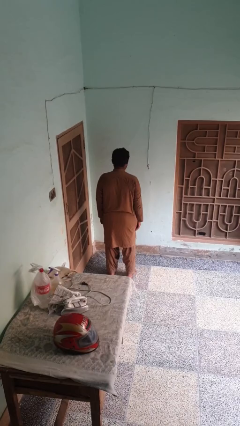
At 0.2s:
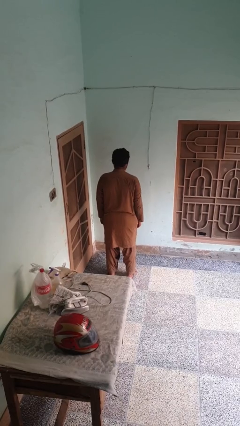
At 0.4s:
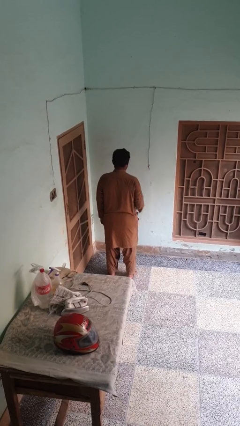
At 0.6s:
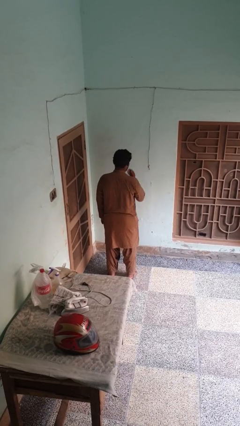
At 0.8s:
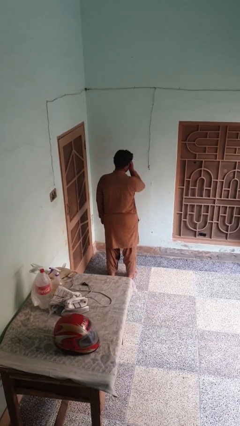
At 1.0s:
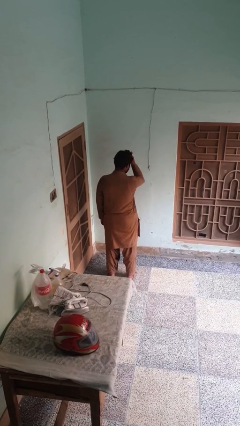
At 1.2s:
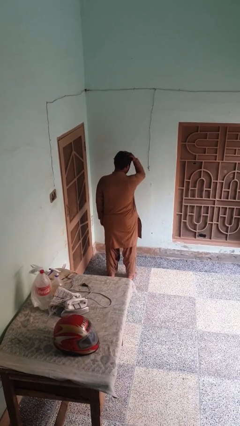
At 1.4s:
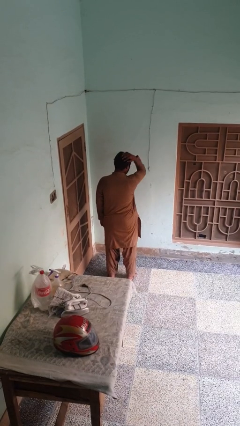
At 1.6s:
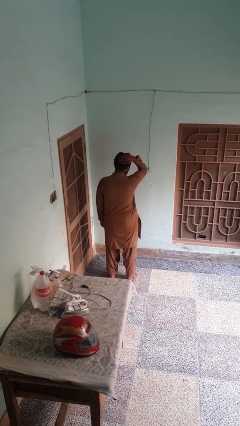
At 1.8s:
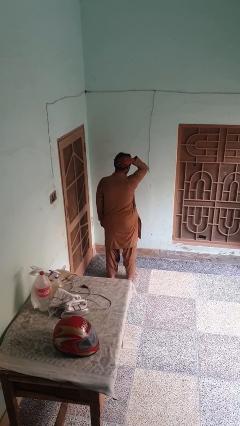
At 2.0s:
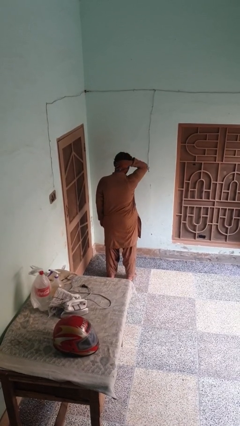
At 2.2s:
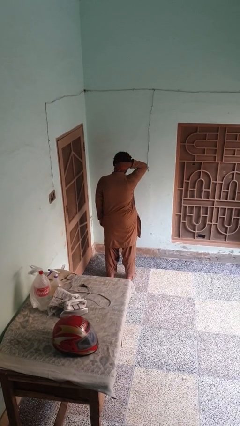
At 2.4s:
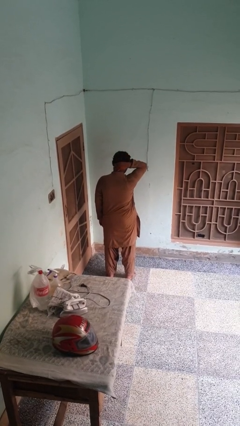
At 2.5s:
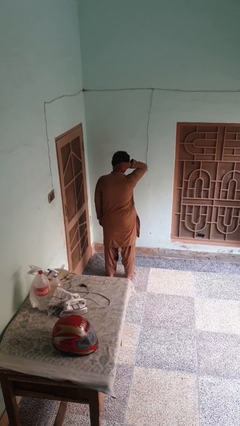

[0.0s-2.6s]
person strokes hair

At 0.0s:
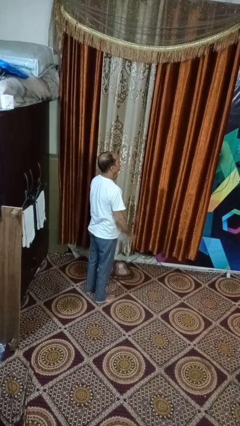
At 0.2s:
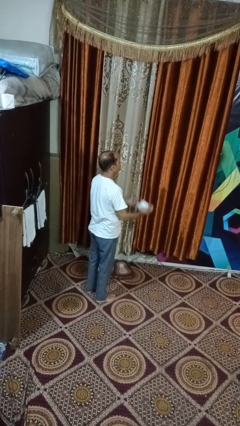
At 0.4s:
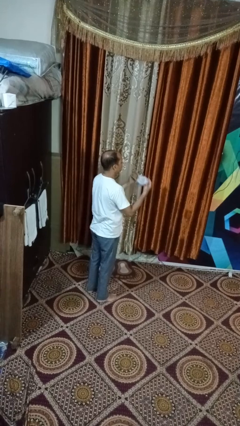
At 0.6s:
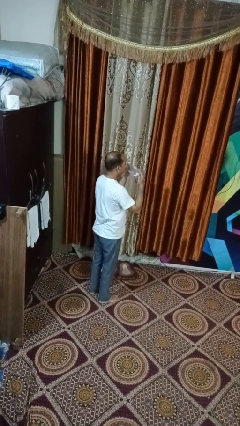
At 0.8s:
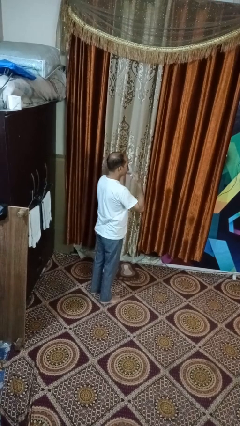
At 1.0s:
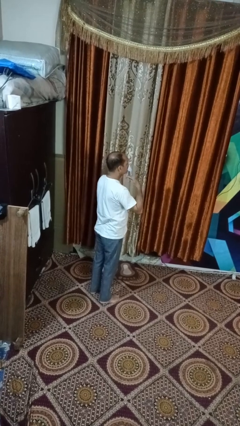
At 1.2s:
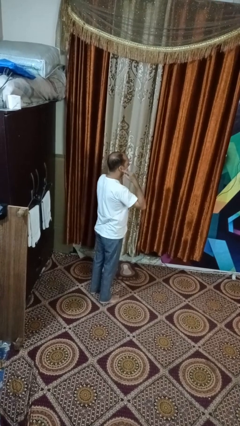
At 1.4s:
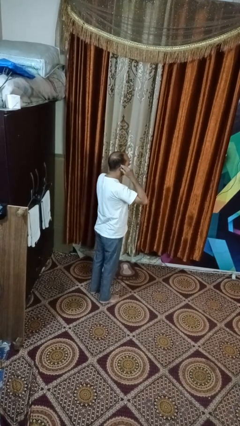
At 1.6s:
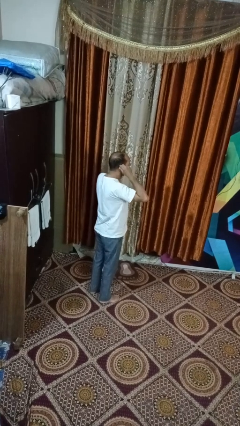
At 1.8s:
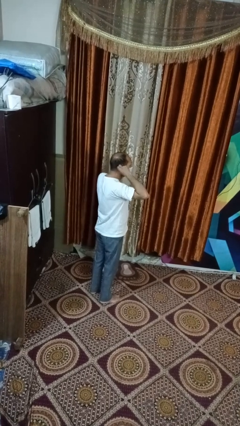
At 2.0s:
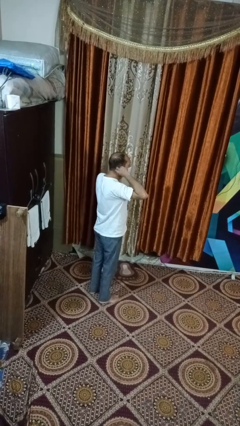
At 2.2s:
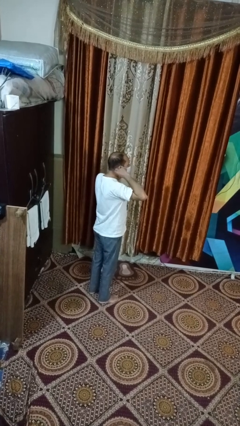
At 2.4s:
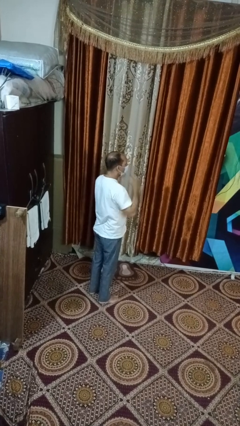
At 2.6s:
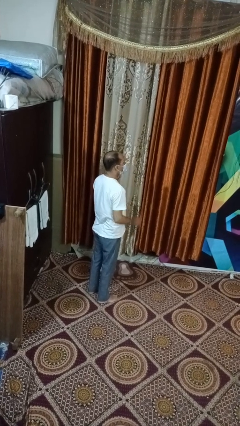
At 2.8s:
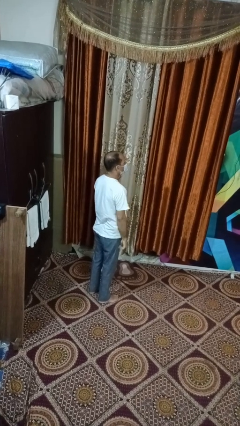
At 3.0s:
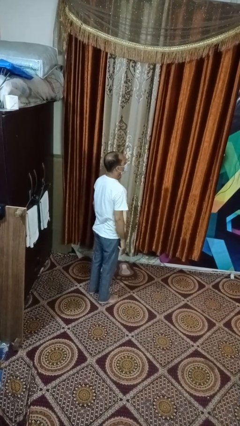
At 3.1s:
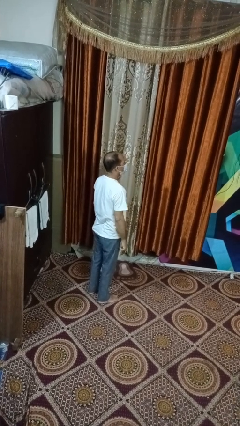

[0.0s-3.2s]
person puts on facemask

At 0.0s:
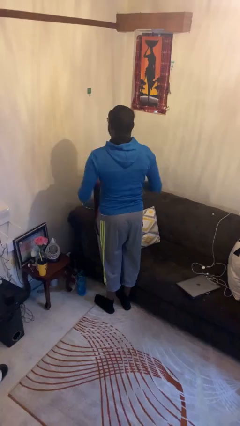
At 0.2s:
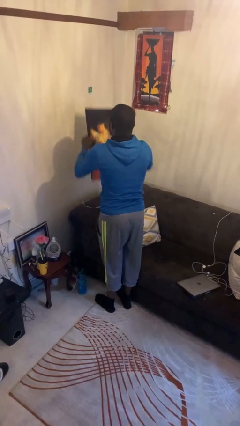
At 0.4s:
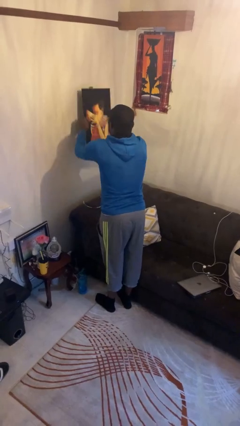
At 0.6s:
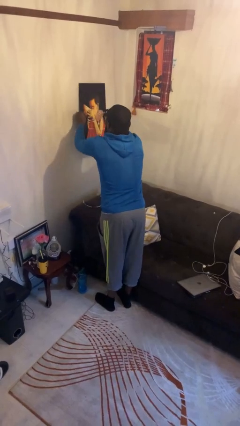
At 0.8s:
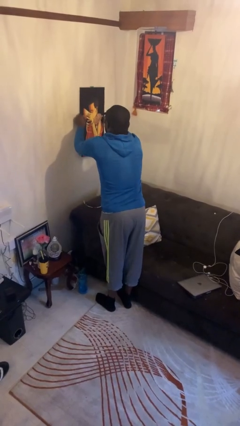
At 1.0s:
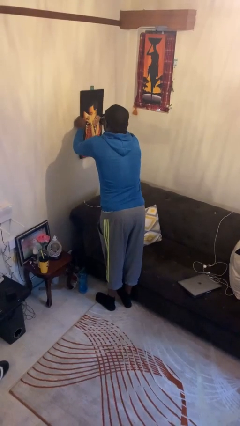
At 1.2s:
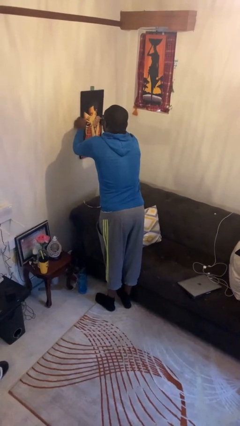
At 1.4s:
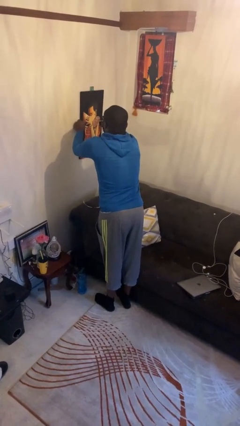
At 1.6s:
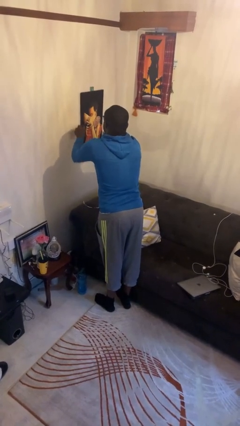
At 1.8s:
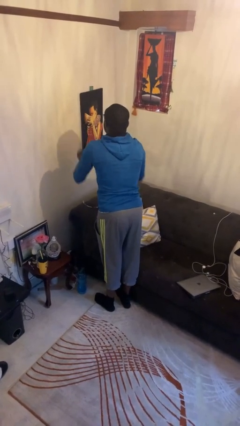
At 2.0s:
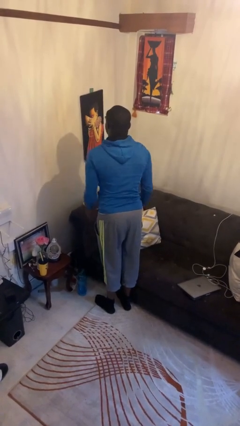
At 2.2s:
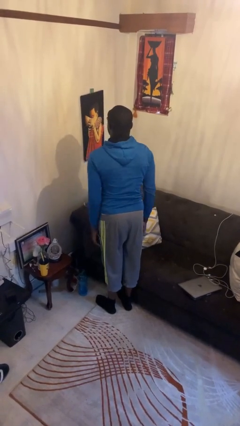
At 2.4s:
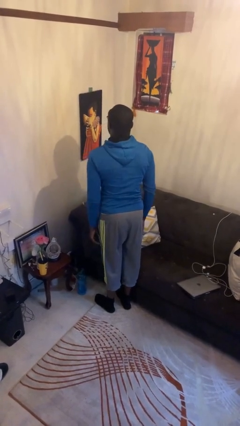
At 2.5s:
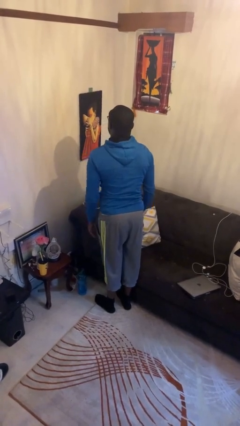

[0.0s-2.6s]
person puts up picture frame

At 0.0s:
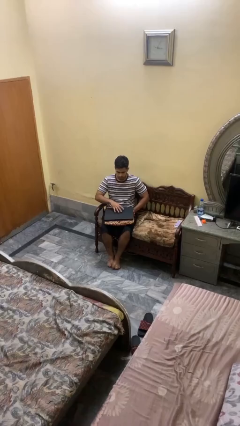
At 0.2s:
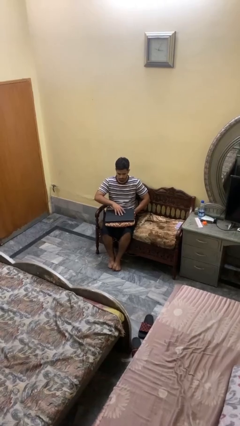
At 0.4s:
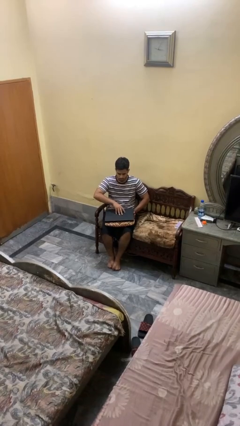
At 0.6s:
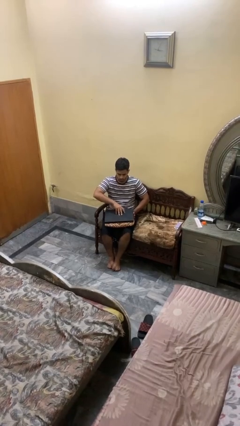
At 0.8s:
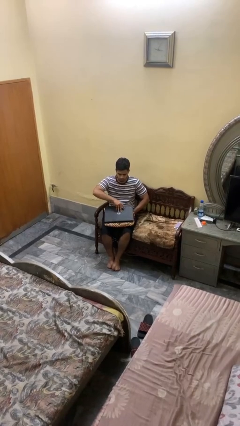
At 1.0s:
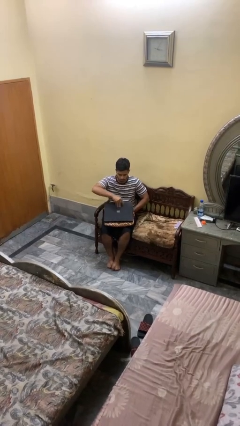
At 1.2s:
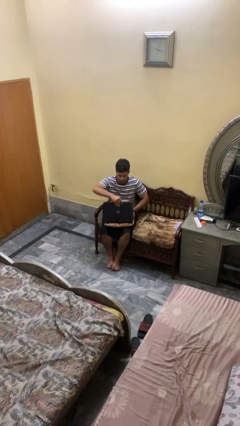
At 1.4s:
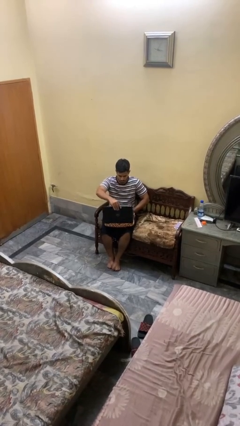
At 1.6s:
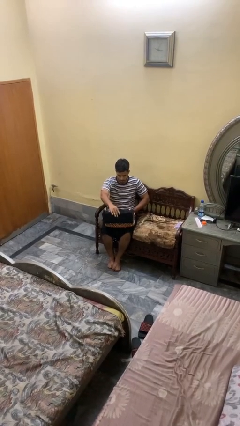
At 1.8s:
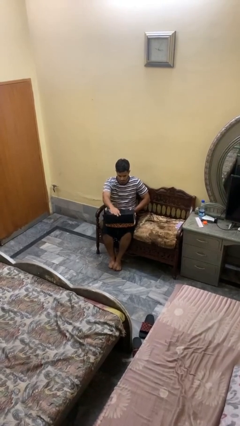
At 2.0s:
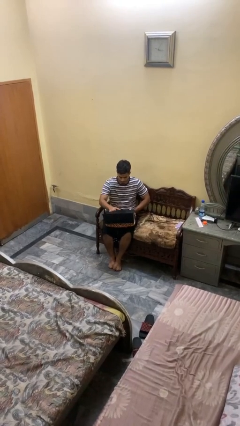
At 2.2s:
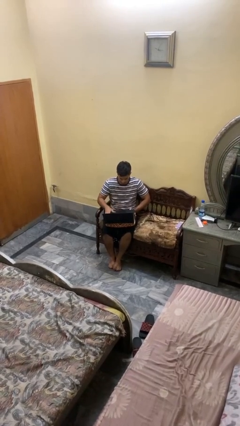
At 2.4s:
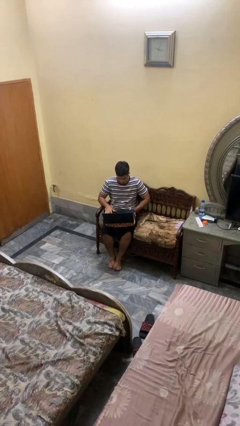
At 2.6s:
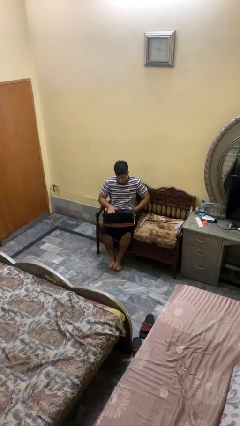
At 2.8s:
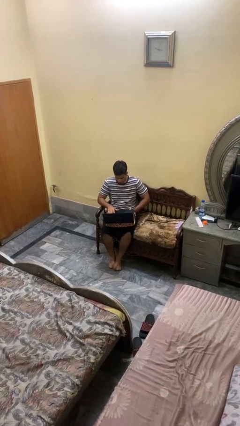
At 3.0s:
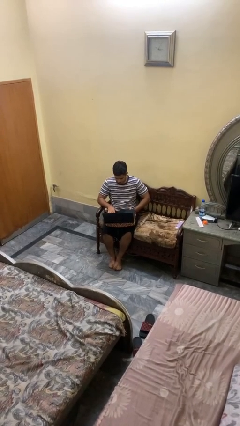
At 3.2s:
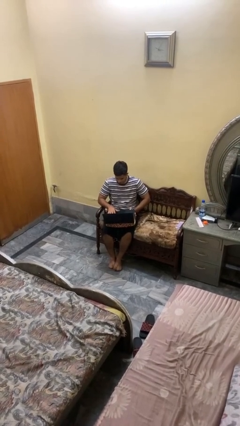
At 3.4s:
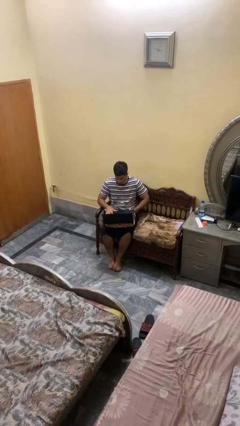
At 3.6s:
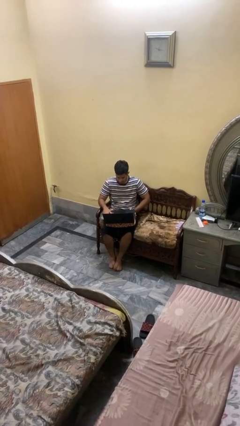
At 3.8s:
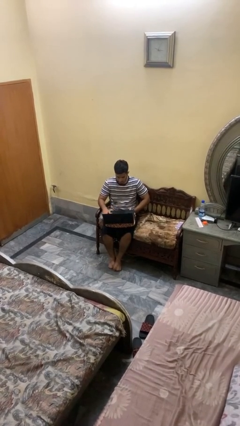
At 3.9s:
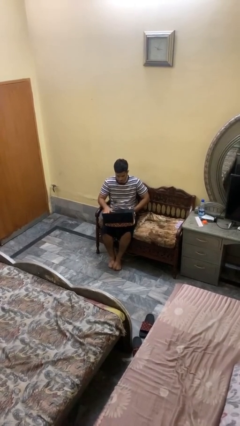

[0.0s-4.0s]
person opens laptop

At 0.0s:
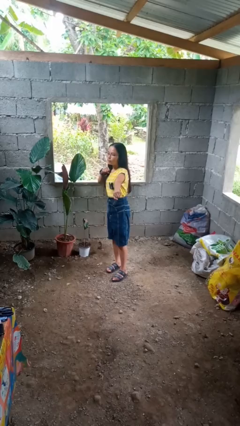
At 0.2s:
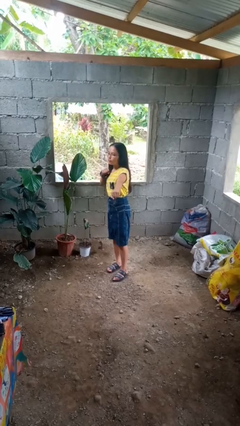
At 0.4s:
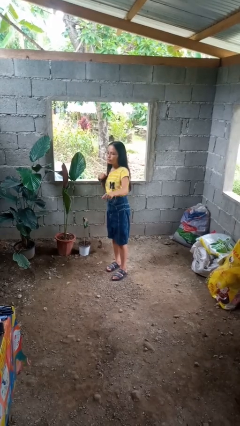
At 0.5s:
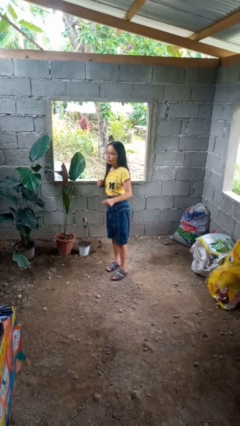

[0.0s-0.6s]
person karate chop

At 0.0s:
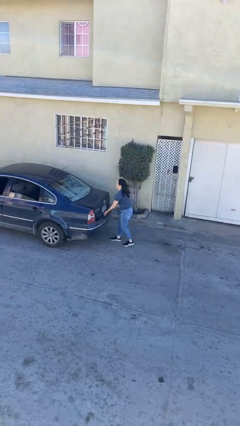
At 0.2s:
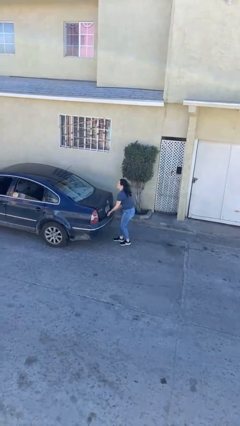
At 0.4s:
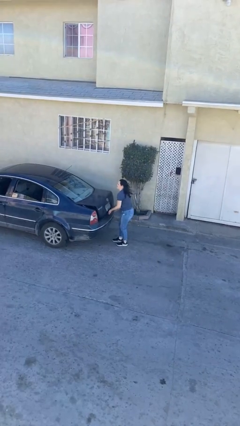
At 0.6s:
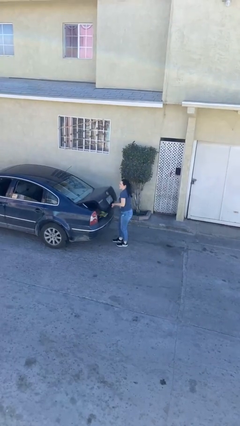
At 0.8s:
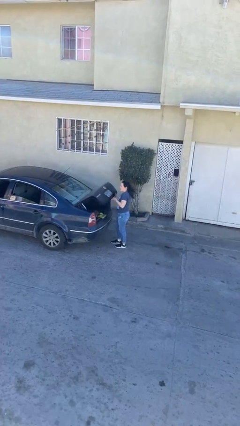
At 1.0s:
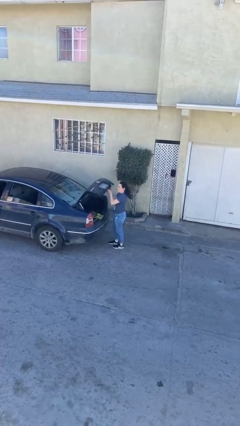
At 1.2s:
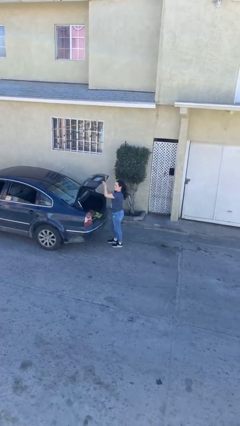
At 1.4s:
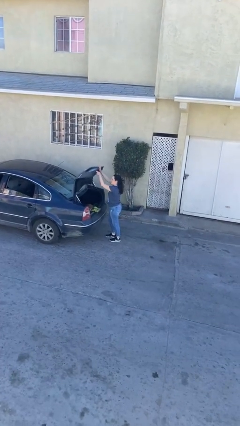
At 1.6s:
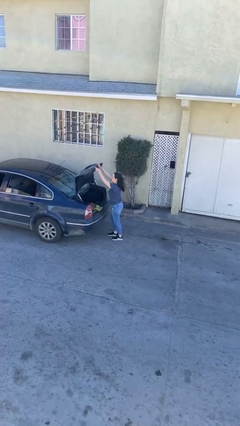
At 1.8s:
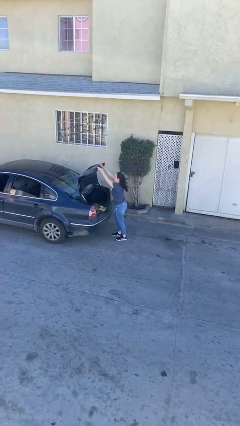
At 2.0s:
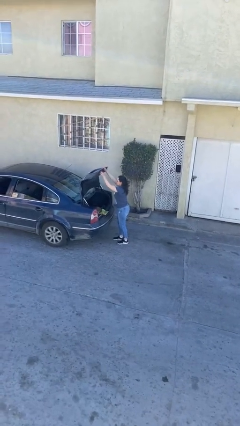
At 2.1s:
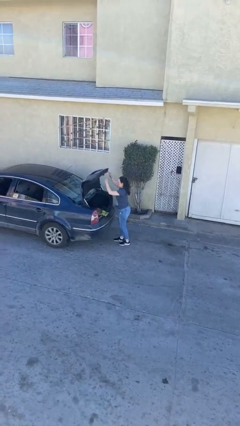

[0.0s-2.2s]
person opens car trunk

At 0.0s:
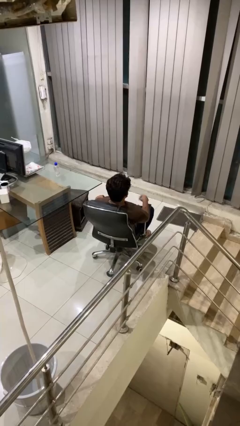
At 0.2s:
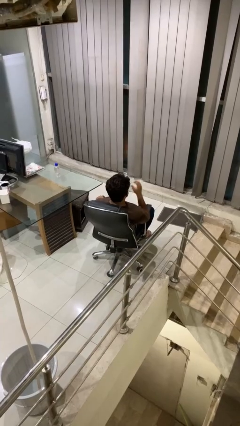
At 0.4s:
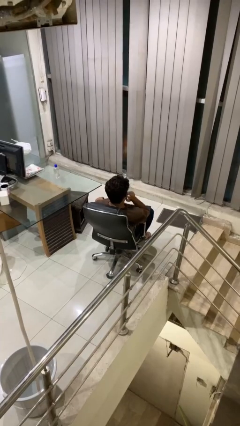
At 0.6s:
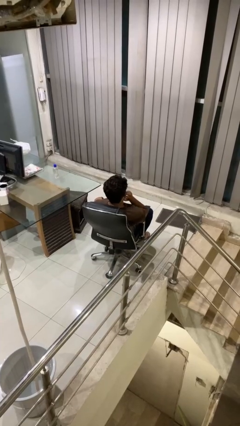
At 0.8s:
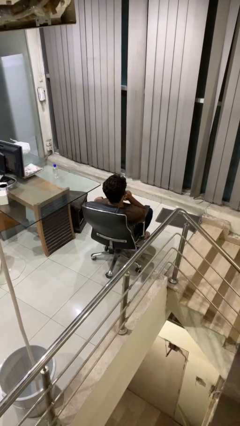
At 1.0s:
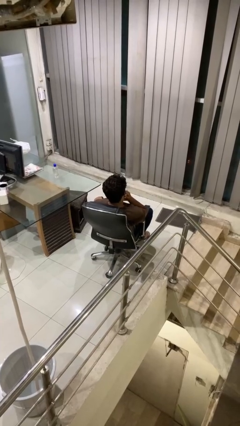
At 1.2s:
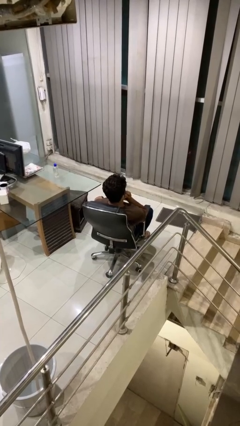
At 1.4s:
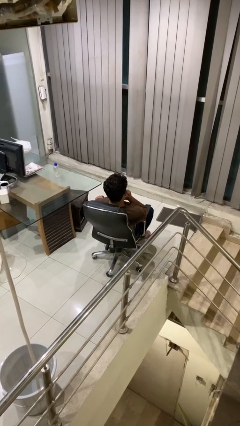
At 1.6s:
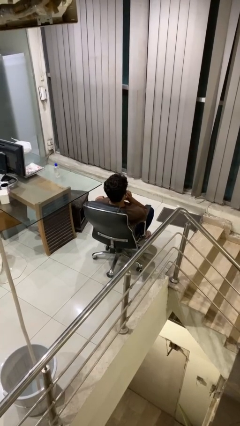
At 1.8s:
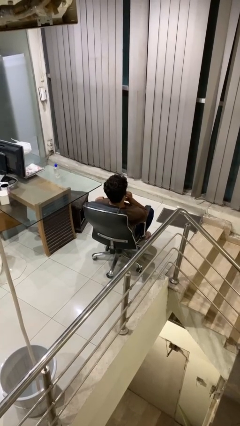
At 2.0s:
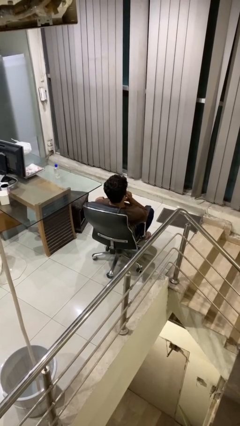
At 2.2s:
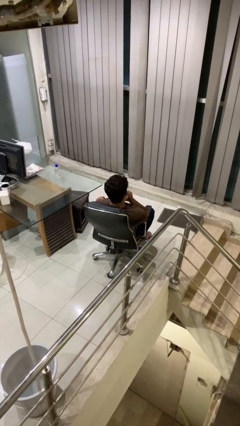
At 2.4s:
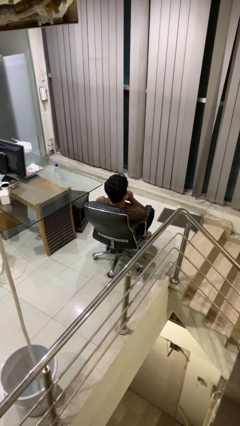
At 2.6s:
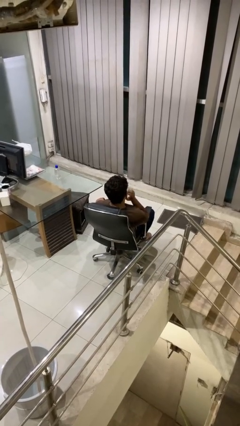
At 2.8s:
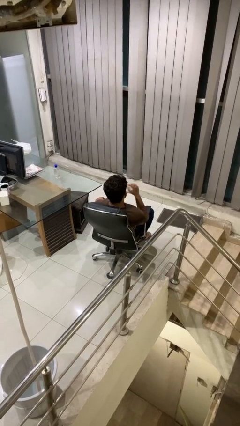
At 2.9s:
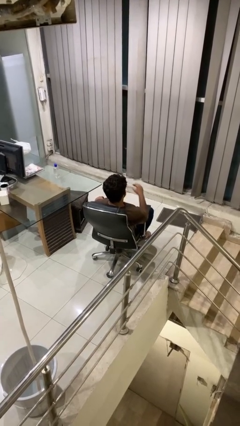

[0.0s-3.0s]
person strokes chin
